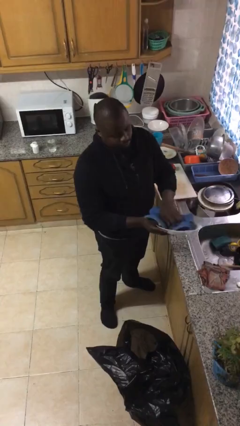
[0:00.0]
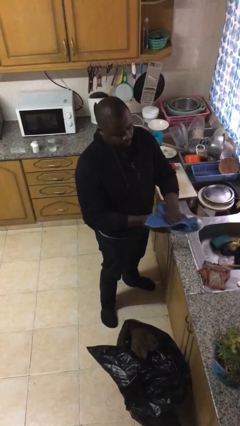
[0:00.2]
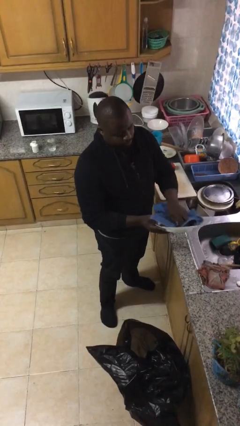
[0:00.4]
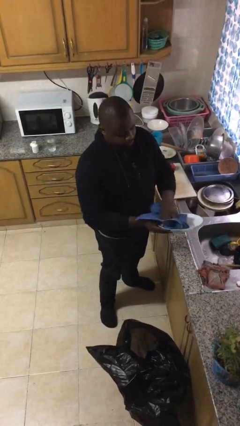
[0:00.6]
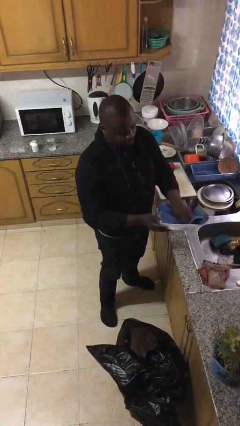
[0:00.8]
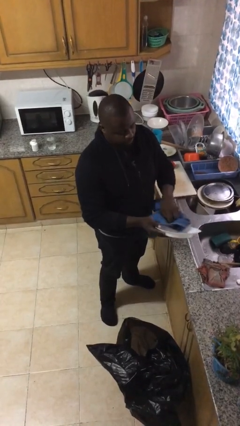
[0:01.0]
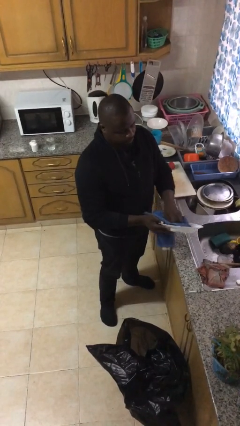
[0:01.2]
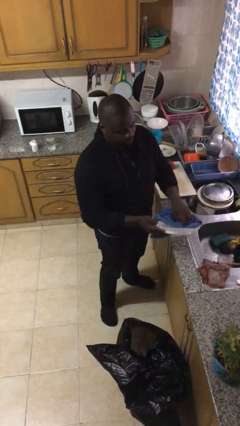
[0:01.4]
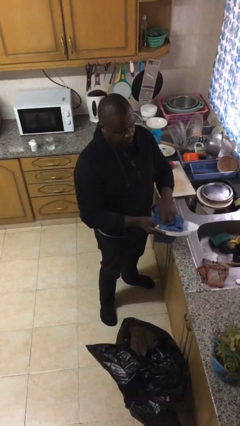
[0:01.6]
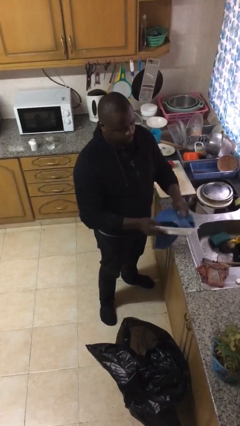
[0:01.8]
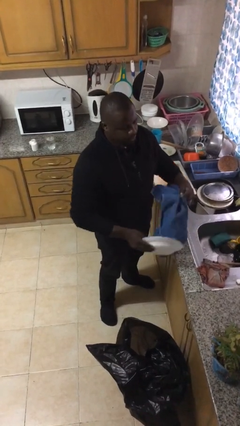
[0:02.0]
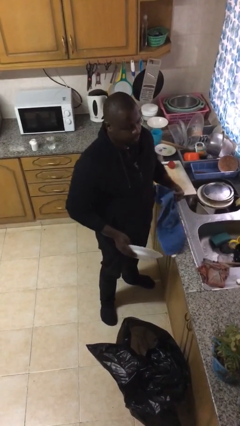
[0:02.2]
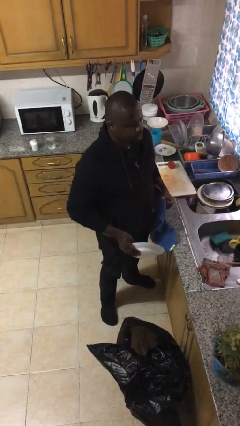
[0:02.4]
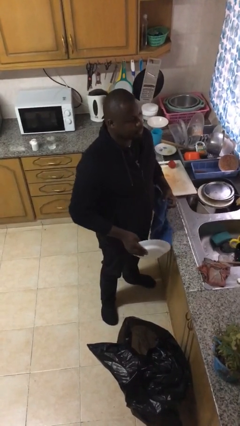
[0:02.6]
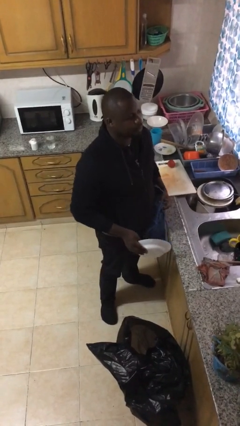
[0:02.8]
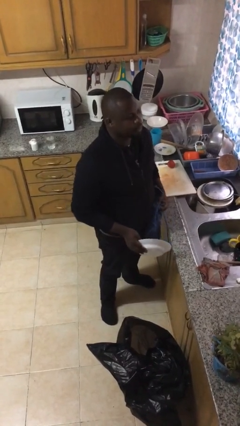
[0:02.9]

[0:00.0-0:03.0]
person dries dish

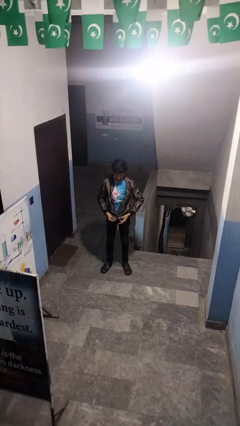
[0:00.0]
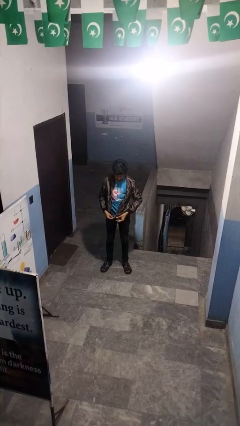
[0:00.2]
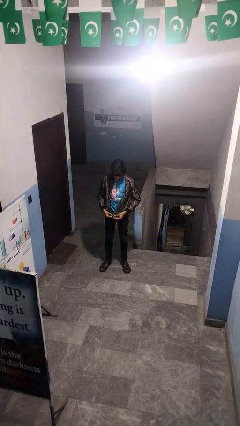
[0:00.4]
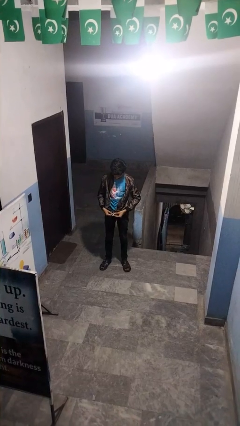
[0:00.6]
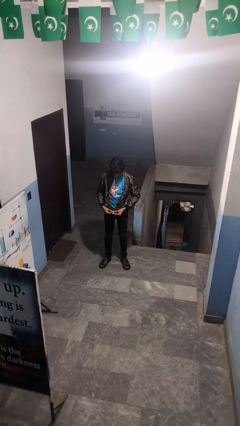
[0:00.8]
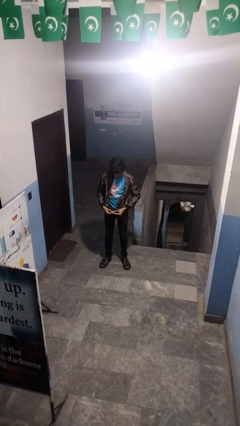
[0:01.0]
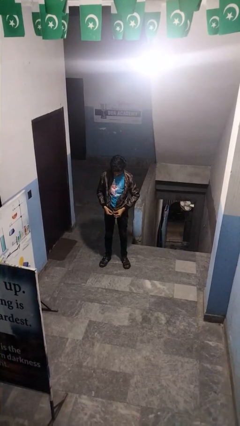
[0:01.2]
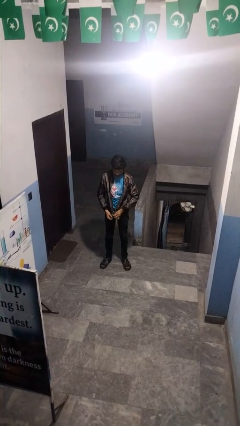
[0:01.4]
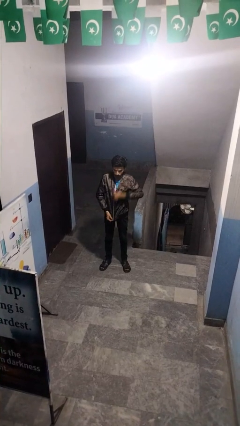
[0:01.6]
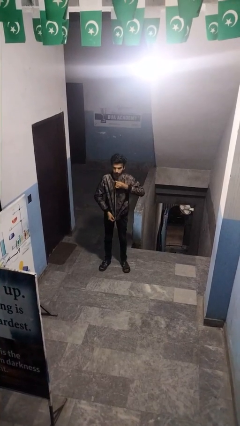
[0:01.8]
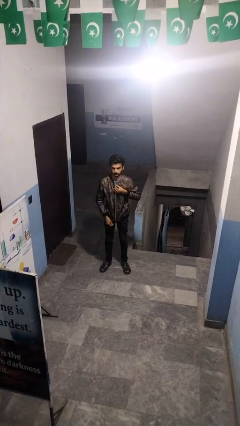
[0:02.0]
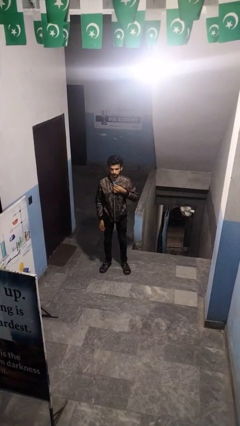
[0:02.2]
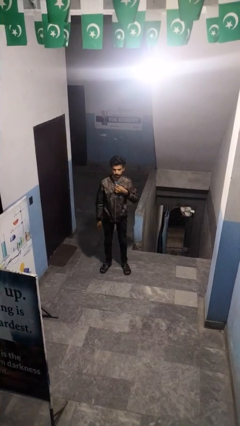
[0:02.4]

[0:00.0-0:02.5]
person zips up jacket

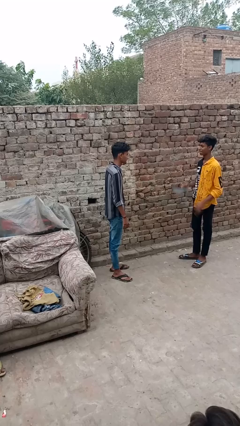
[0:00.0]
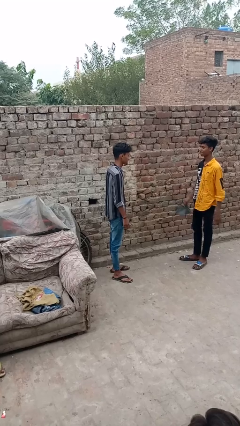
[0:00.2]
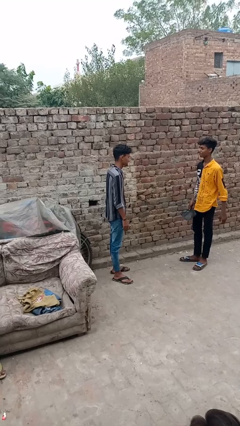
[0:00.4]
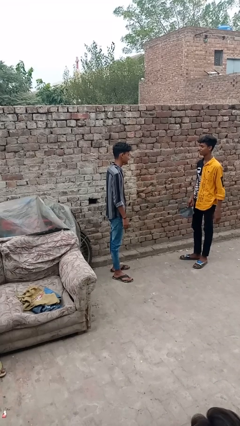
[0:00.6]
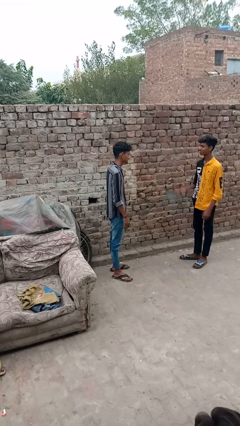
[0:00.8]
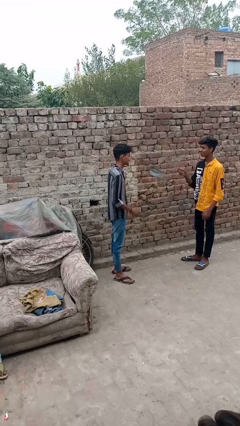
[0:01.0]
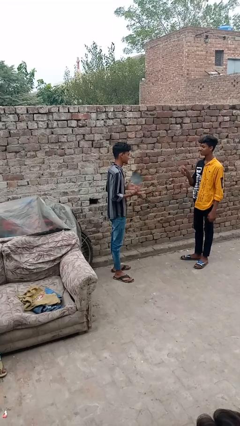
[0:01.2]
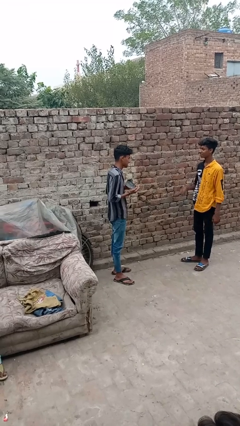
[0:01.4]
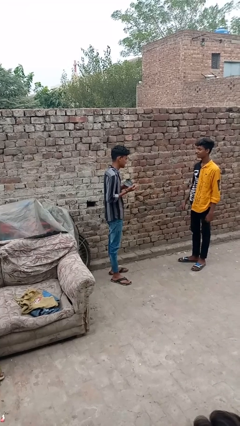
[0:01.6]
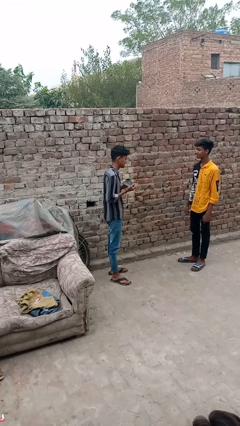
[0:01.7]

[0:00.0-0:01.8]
person catches object from person

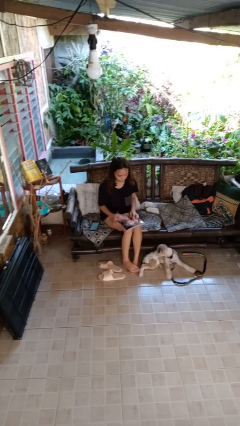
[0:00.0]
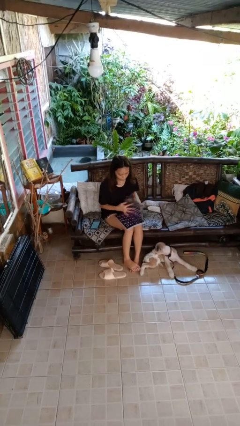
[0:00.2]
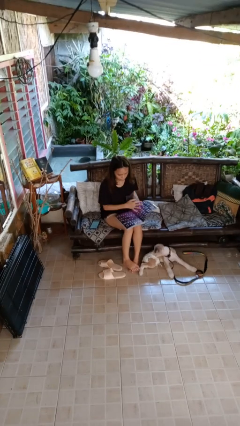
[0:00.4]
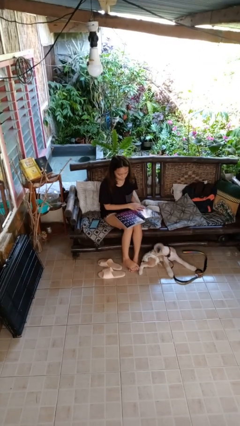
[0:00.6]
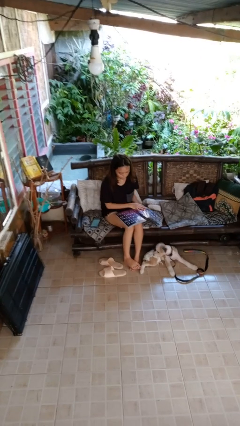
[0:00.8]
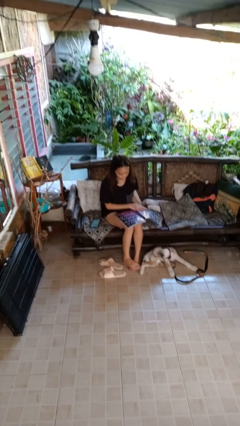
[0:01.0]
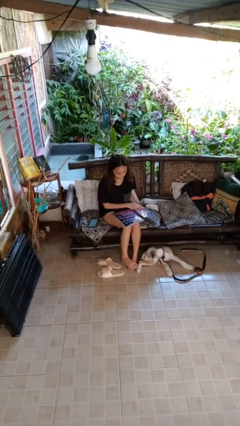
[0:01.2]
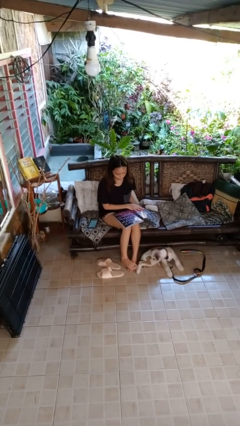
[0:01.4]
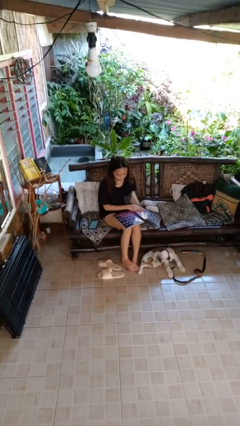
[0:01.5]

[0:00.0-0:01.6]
person reads magazine

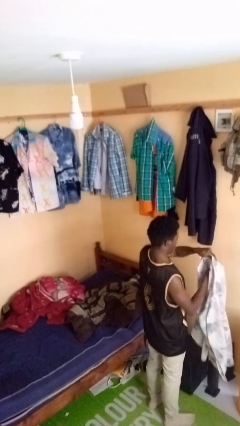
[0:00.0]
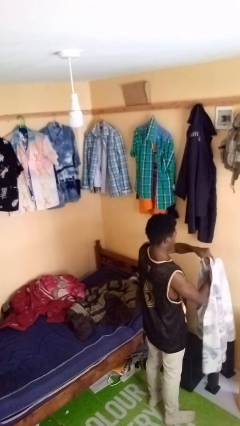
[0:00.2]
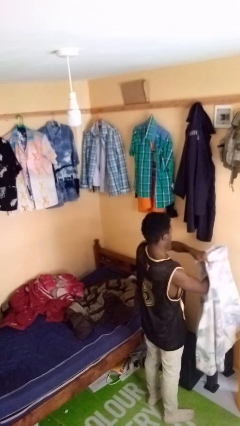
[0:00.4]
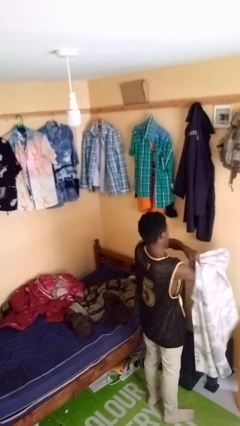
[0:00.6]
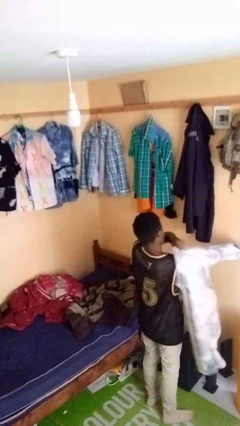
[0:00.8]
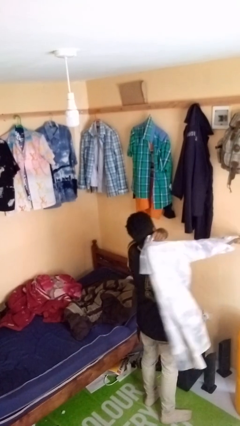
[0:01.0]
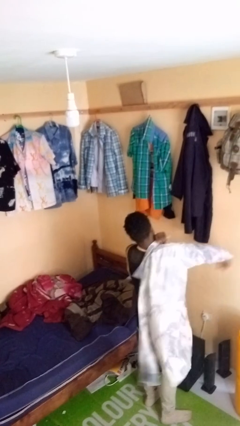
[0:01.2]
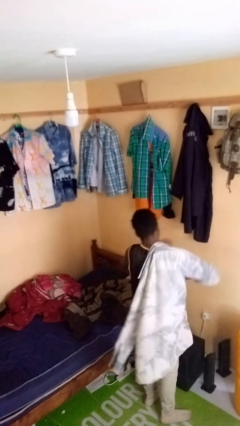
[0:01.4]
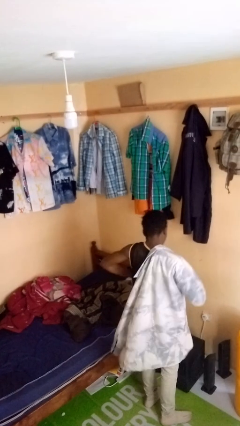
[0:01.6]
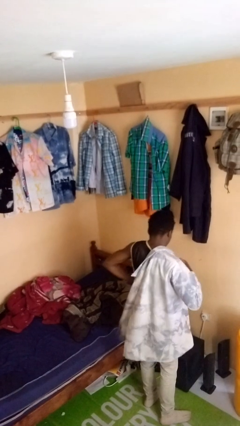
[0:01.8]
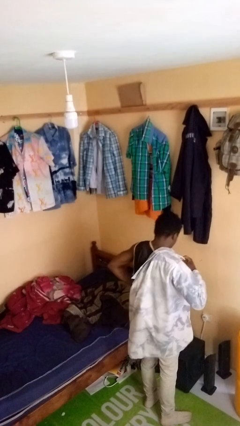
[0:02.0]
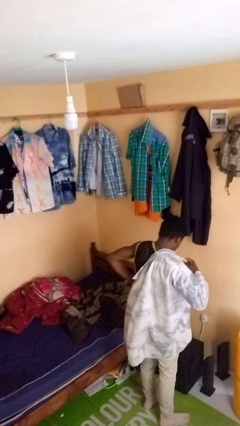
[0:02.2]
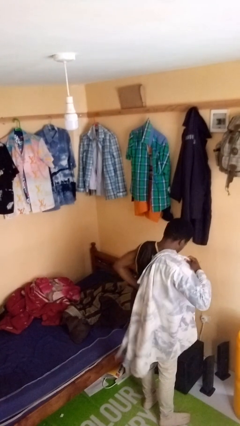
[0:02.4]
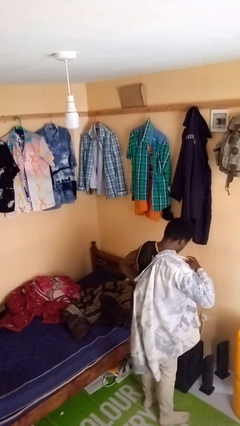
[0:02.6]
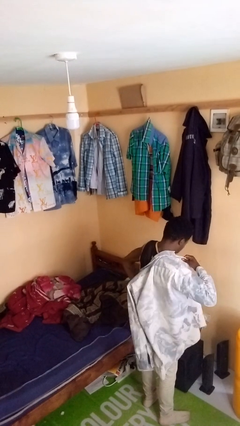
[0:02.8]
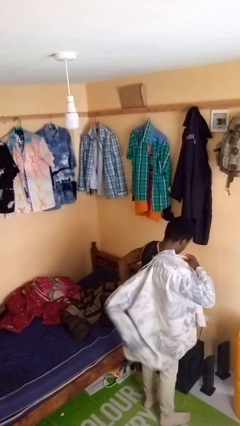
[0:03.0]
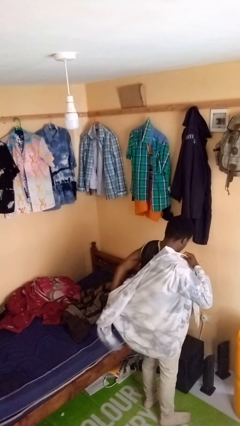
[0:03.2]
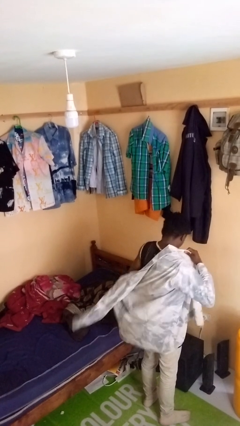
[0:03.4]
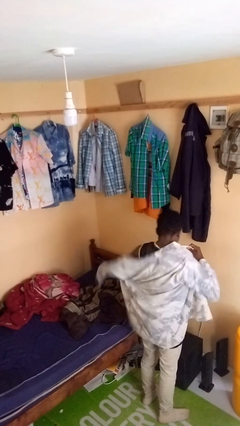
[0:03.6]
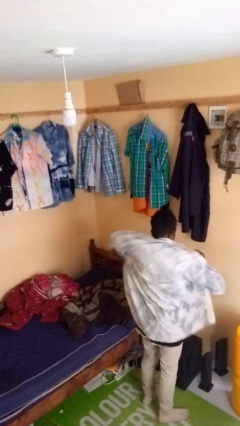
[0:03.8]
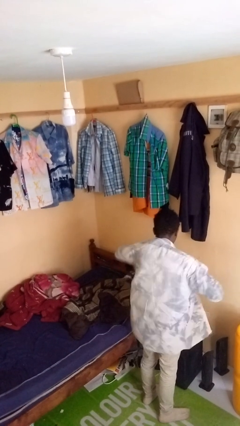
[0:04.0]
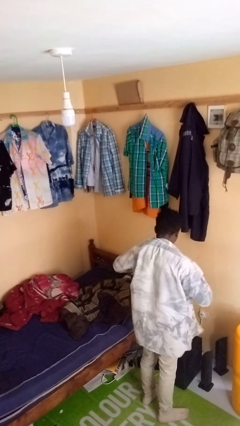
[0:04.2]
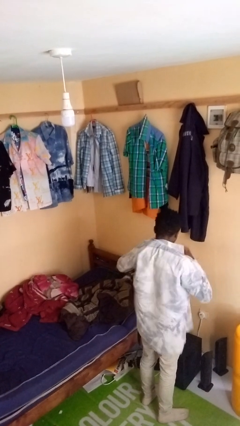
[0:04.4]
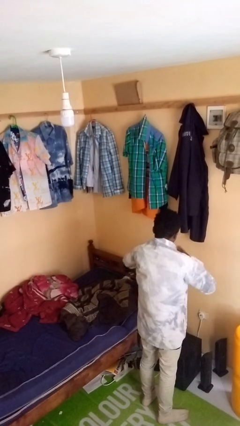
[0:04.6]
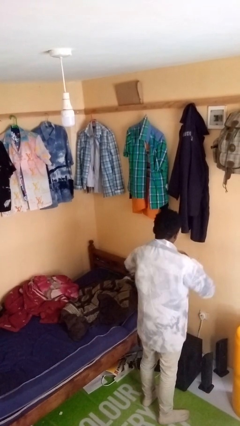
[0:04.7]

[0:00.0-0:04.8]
person puts on shirt

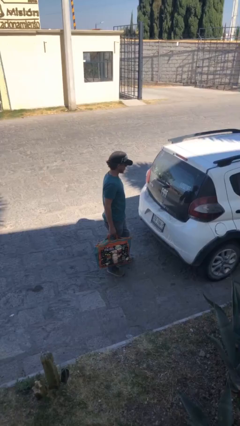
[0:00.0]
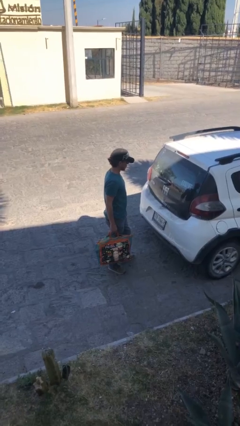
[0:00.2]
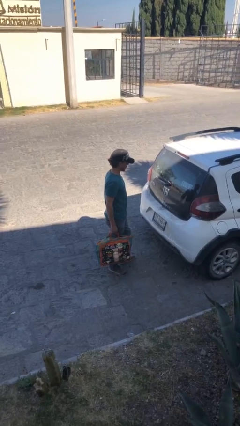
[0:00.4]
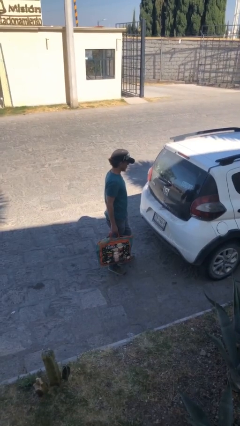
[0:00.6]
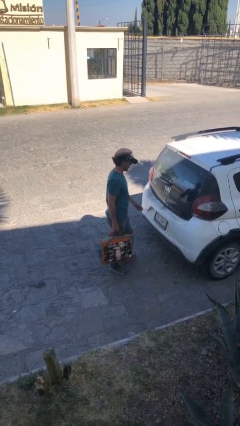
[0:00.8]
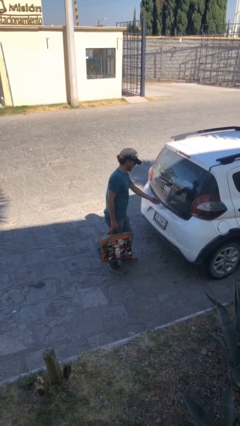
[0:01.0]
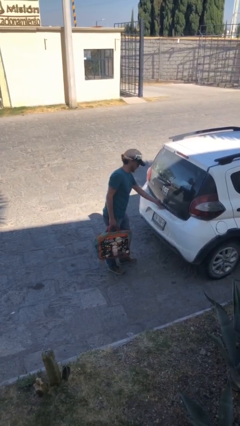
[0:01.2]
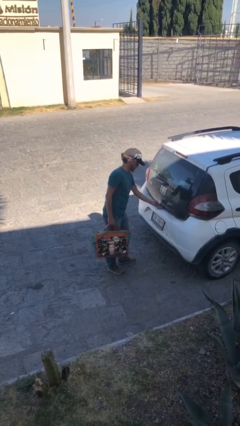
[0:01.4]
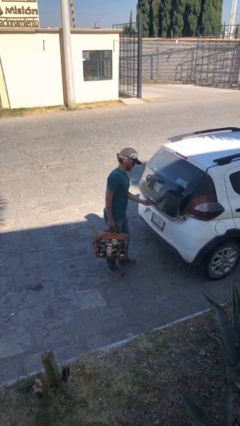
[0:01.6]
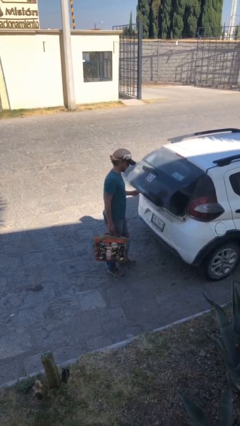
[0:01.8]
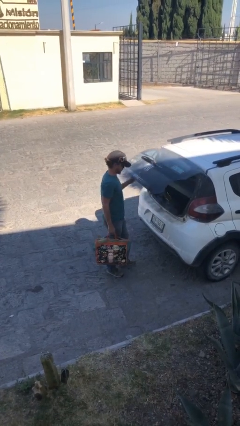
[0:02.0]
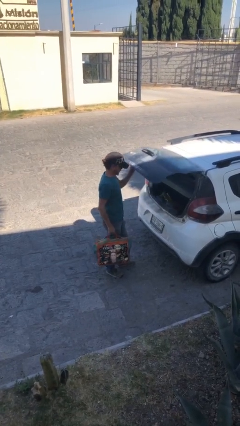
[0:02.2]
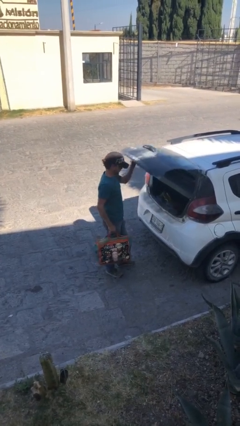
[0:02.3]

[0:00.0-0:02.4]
person opens car trunk

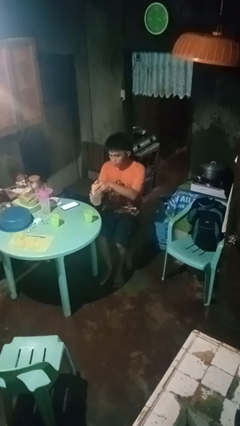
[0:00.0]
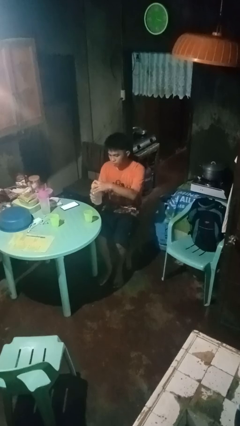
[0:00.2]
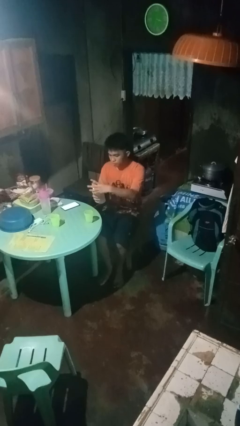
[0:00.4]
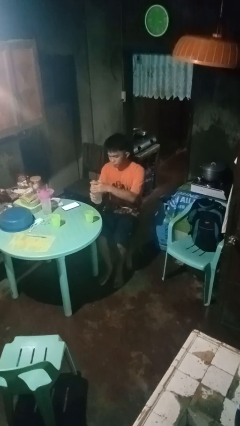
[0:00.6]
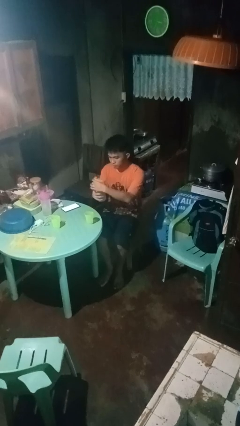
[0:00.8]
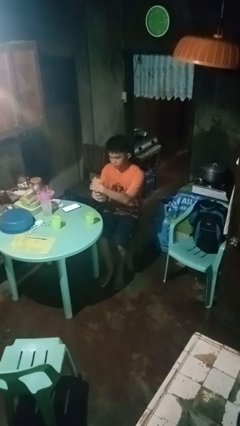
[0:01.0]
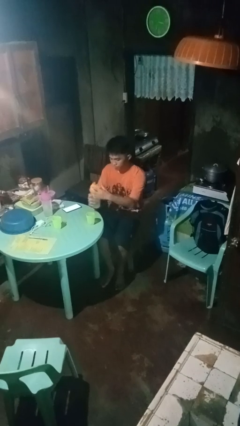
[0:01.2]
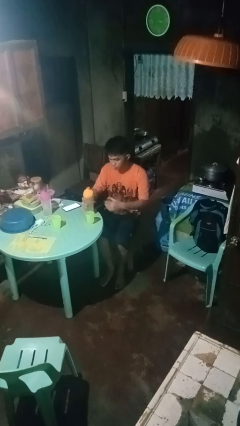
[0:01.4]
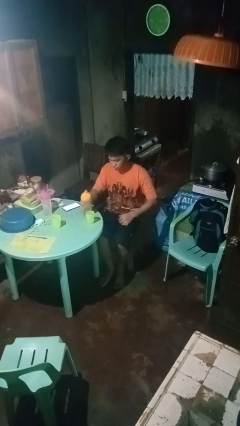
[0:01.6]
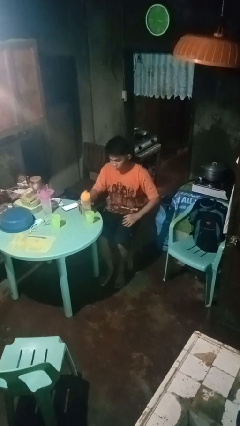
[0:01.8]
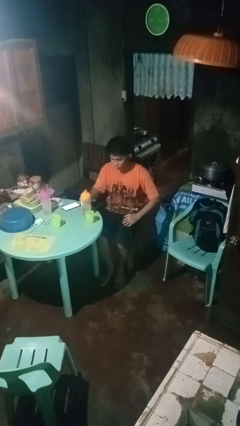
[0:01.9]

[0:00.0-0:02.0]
person screws lid to bottle
